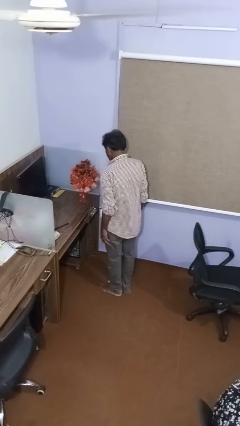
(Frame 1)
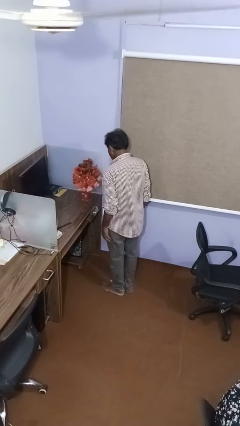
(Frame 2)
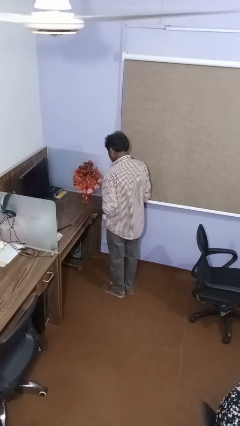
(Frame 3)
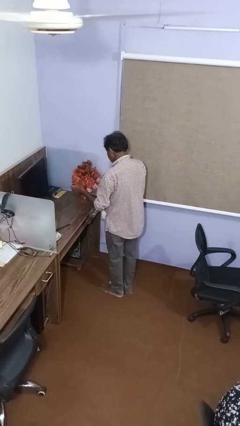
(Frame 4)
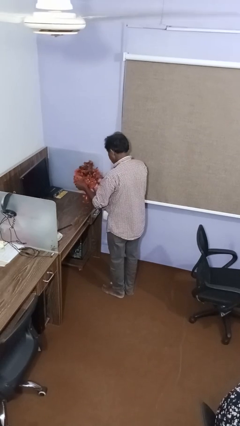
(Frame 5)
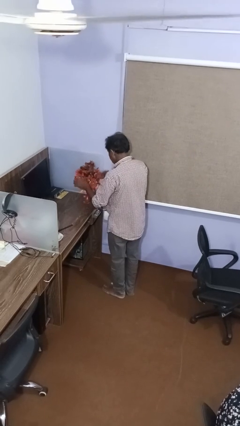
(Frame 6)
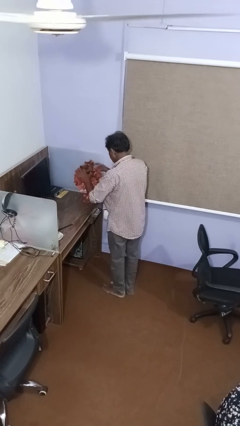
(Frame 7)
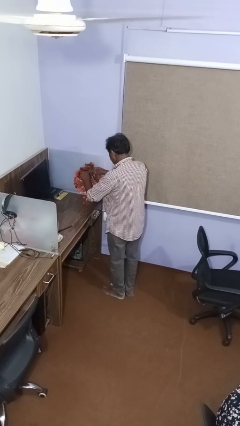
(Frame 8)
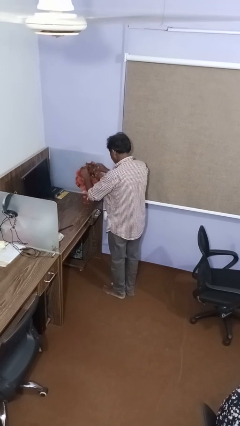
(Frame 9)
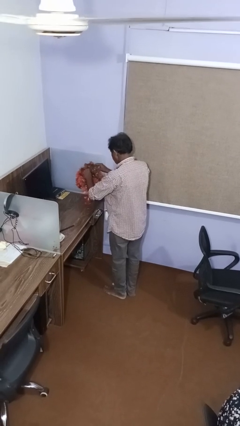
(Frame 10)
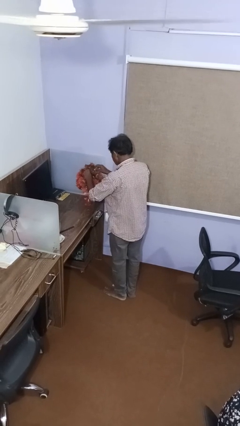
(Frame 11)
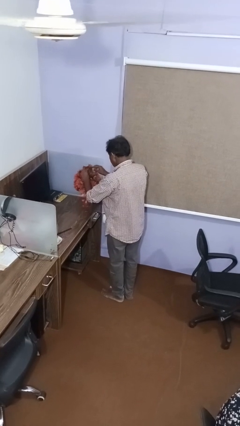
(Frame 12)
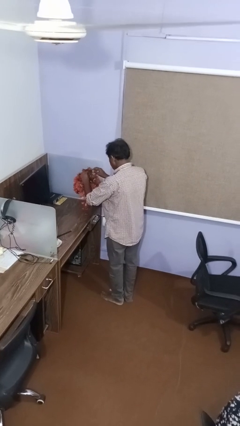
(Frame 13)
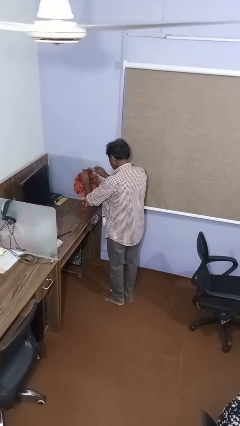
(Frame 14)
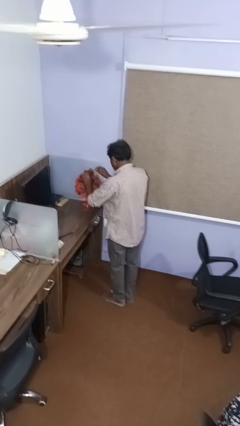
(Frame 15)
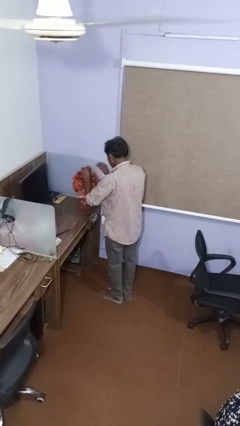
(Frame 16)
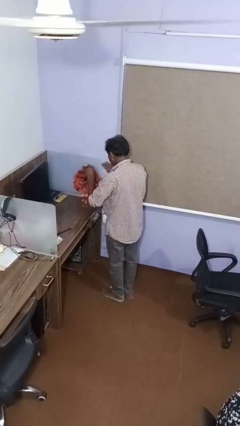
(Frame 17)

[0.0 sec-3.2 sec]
person arranges flowers in vase

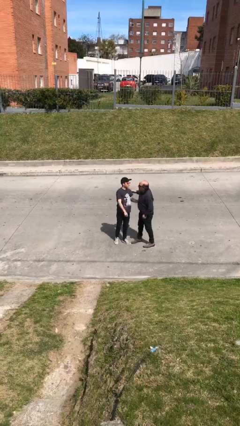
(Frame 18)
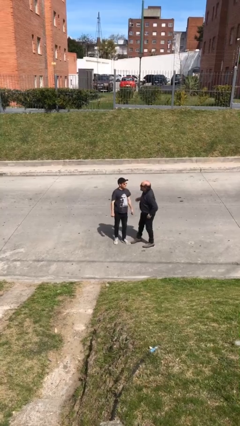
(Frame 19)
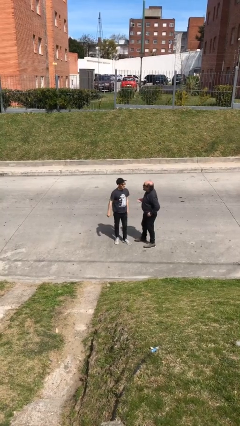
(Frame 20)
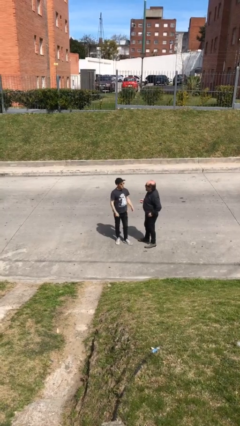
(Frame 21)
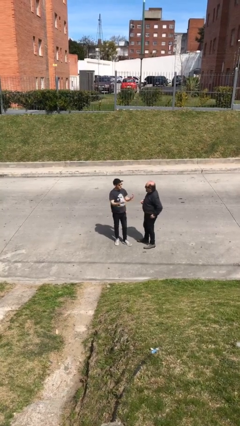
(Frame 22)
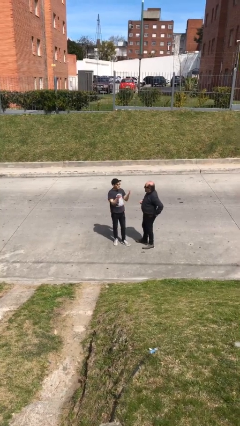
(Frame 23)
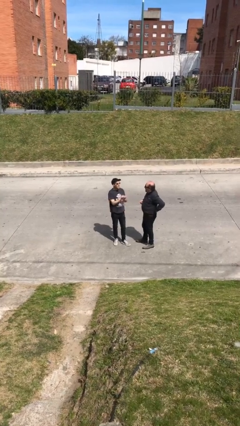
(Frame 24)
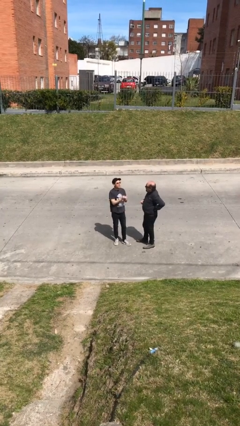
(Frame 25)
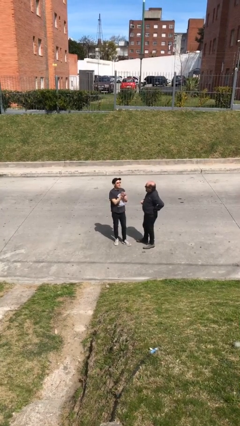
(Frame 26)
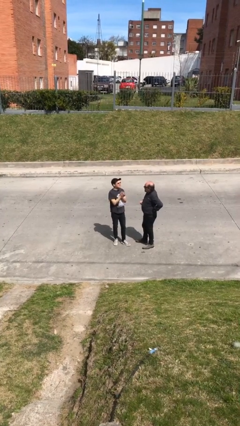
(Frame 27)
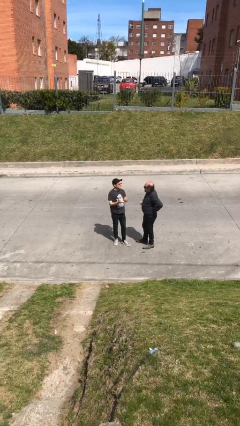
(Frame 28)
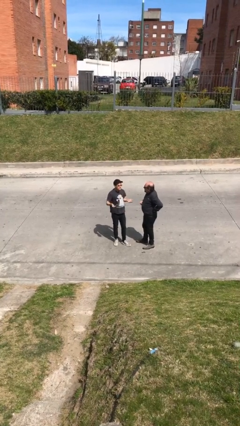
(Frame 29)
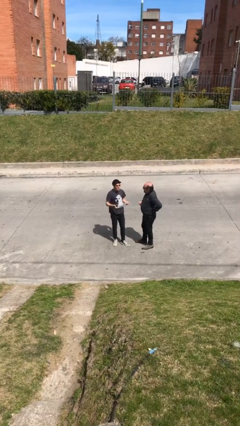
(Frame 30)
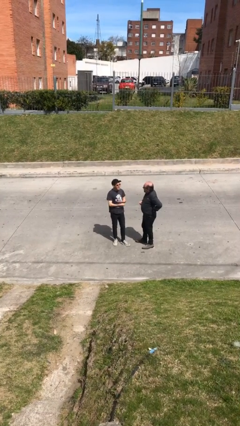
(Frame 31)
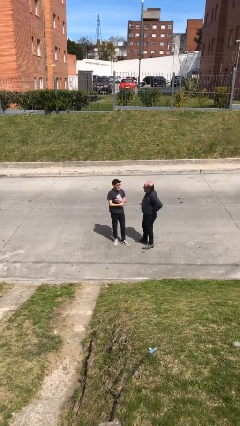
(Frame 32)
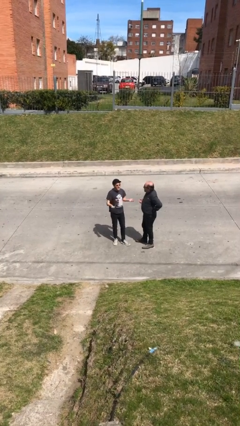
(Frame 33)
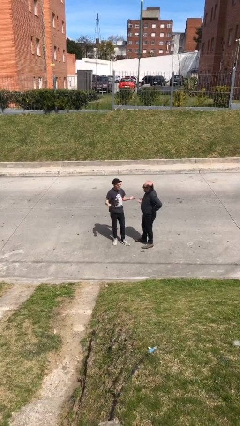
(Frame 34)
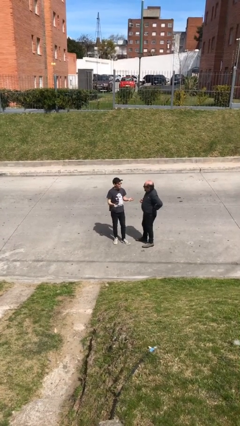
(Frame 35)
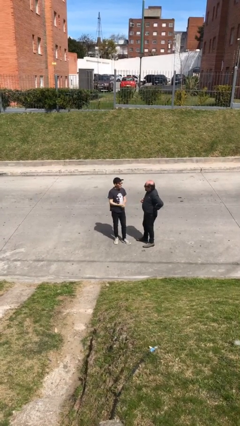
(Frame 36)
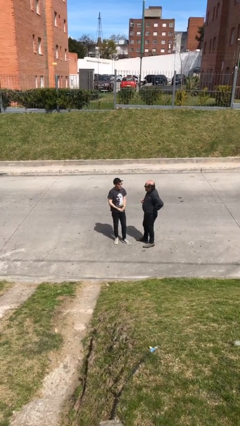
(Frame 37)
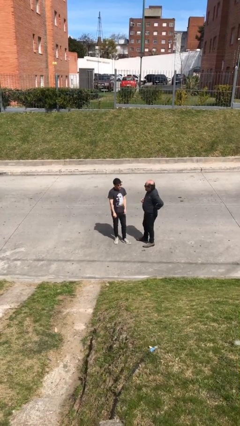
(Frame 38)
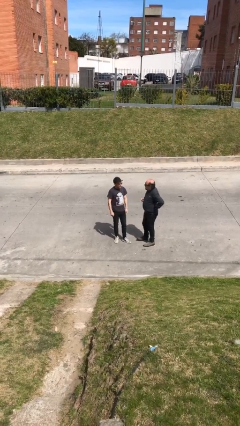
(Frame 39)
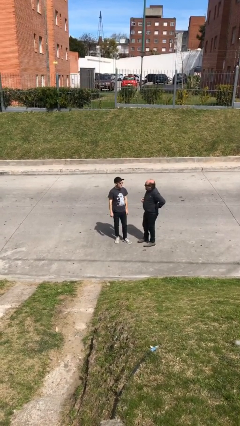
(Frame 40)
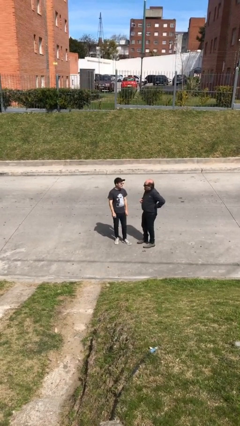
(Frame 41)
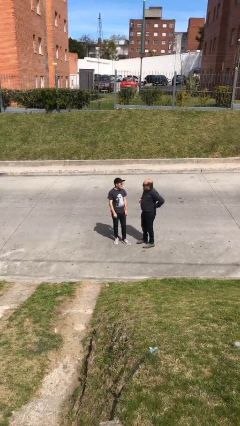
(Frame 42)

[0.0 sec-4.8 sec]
person talks to person

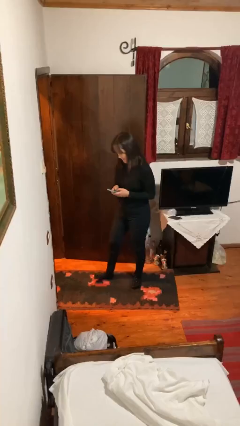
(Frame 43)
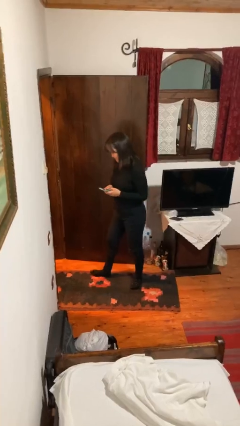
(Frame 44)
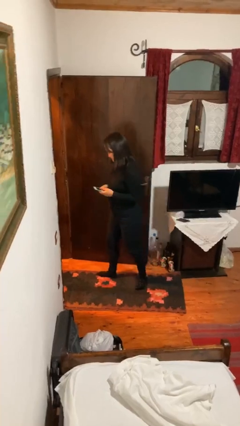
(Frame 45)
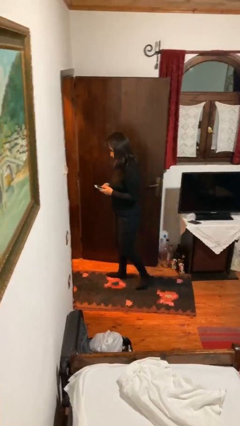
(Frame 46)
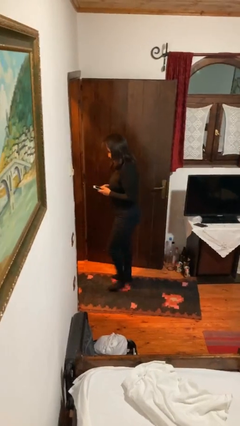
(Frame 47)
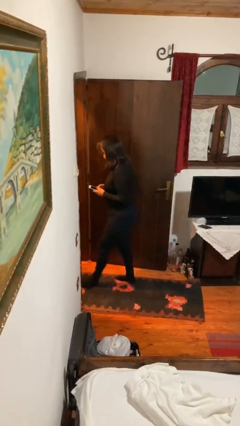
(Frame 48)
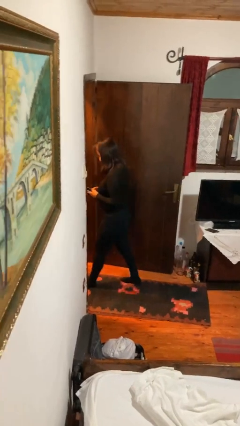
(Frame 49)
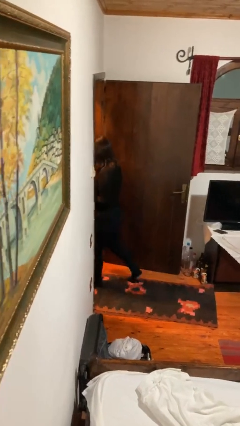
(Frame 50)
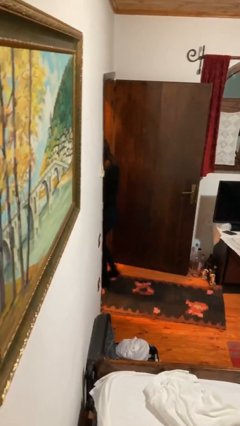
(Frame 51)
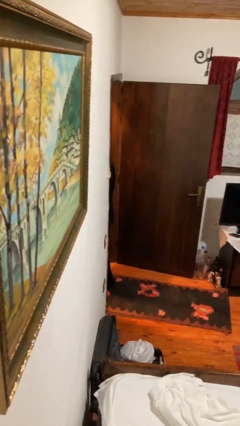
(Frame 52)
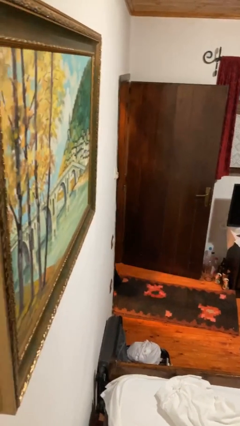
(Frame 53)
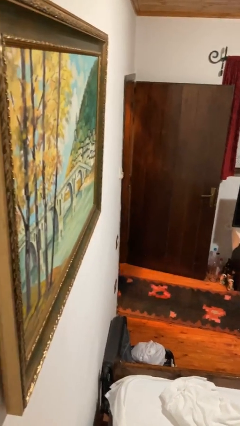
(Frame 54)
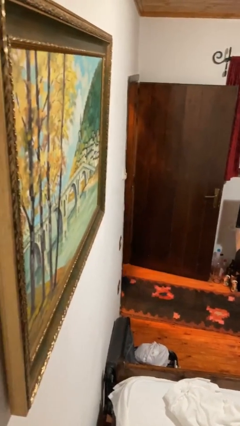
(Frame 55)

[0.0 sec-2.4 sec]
person exits scene through structure

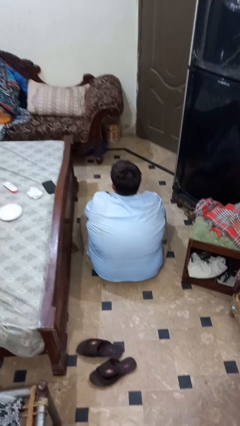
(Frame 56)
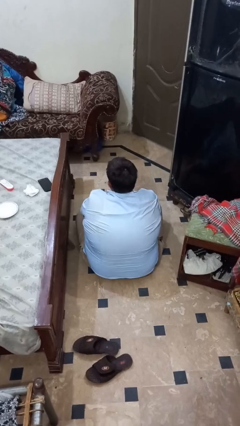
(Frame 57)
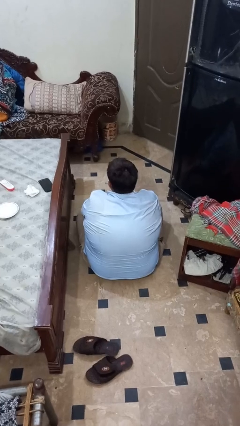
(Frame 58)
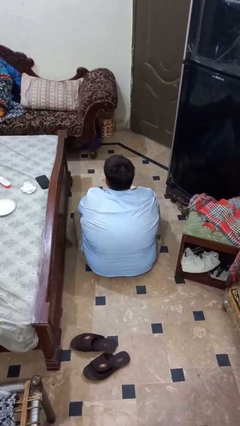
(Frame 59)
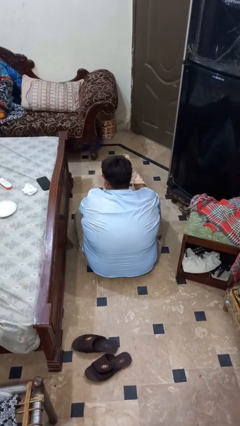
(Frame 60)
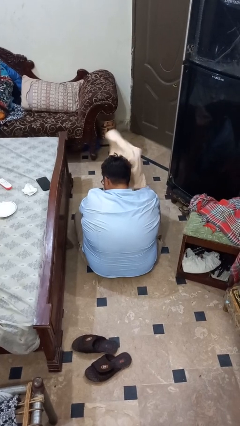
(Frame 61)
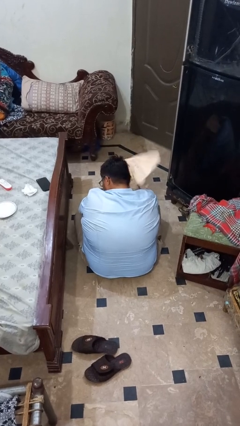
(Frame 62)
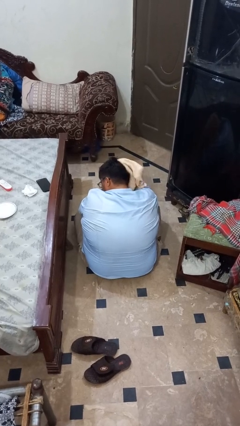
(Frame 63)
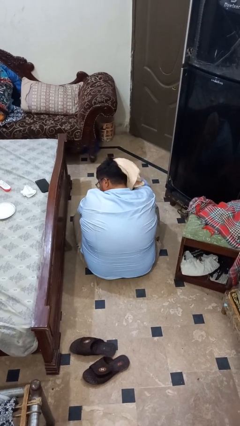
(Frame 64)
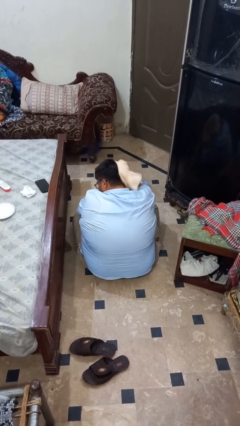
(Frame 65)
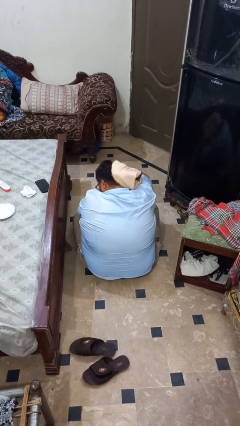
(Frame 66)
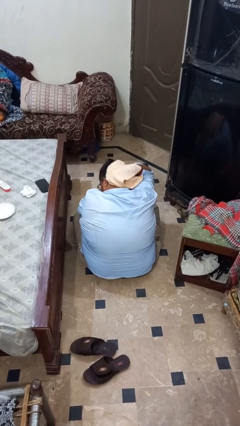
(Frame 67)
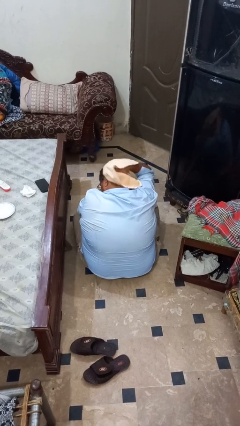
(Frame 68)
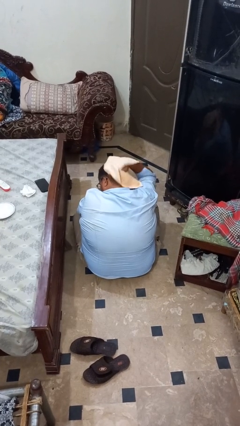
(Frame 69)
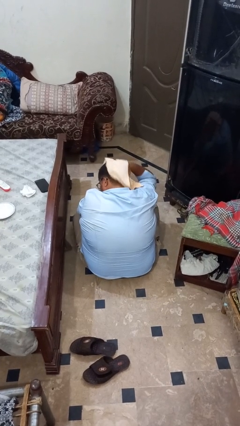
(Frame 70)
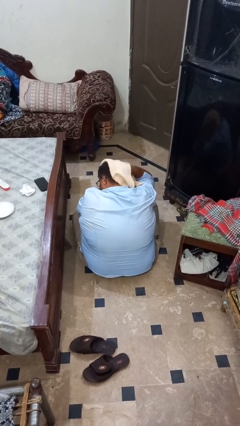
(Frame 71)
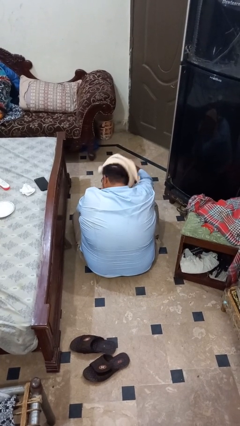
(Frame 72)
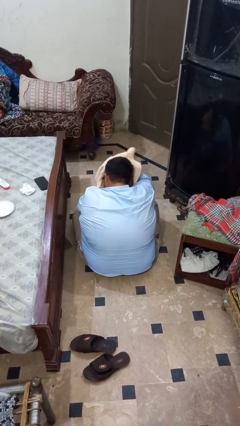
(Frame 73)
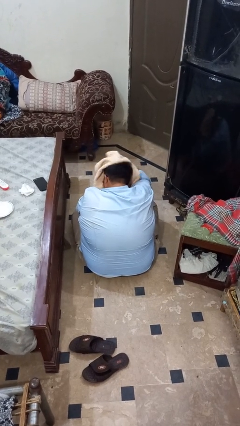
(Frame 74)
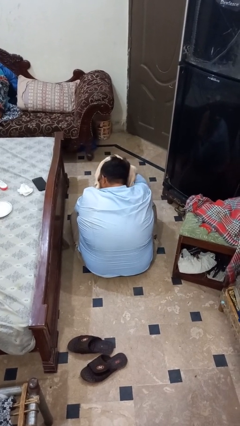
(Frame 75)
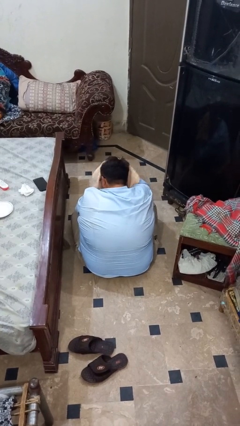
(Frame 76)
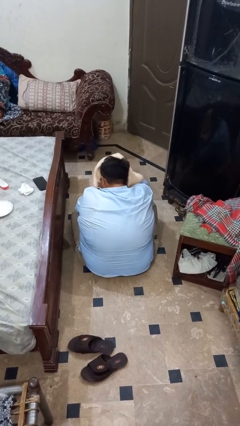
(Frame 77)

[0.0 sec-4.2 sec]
person dries hair with towel

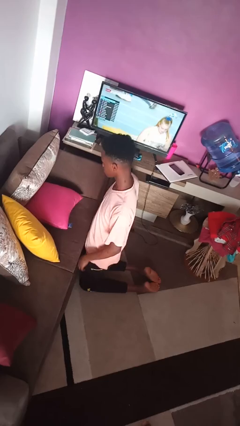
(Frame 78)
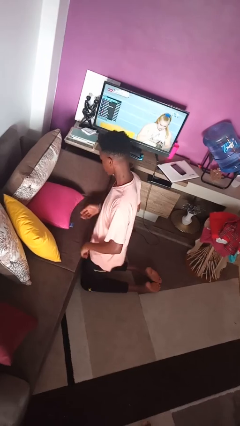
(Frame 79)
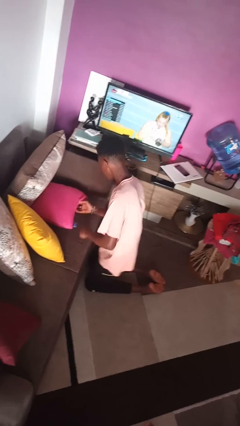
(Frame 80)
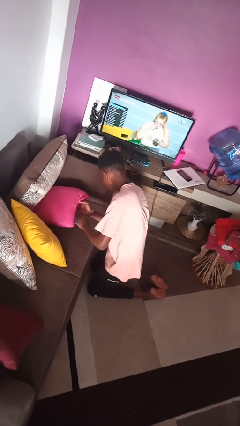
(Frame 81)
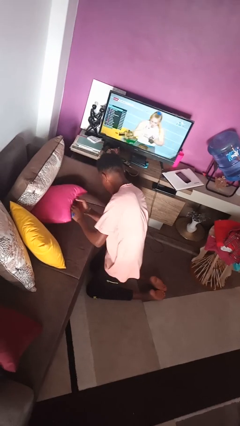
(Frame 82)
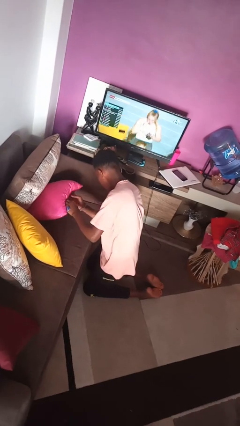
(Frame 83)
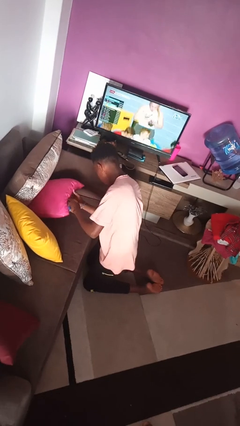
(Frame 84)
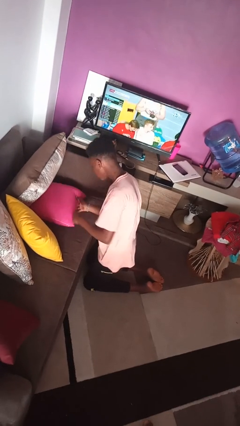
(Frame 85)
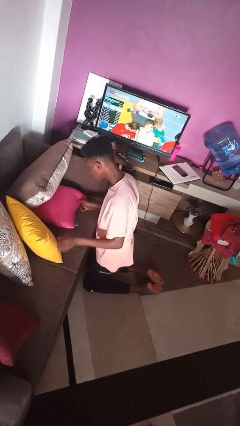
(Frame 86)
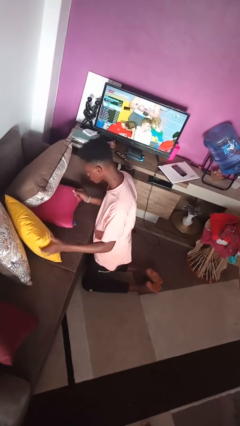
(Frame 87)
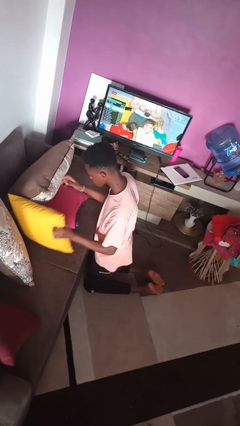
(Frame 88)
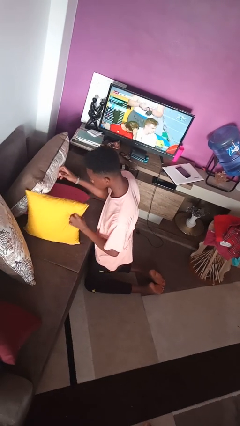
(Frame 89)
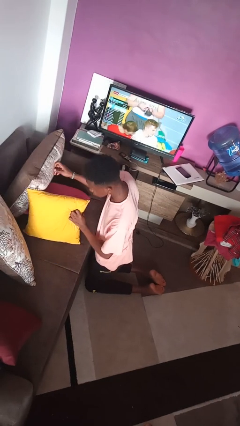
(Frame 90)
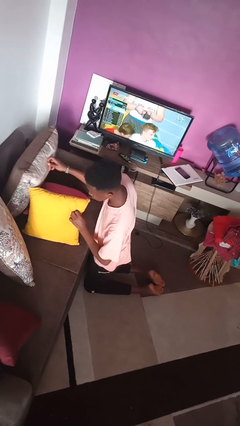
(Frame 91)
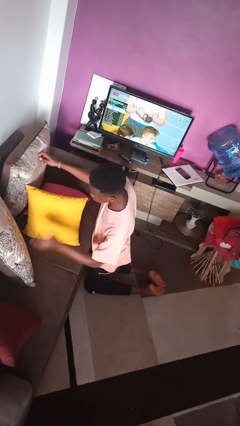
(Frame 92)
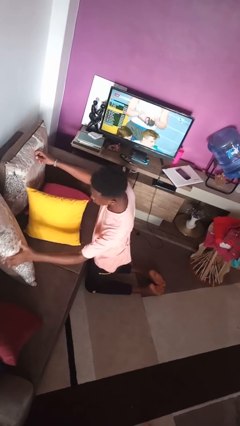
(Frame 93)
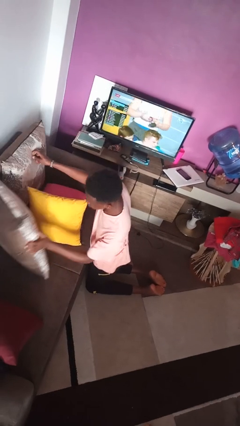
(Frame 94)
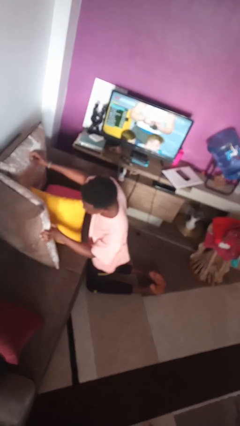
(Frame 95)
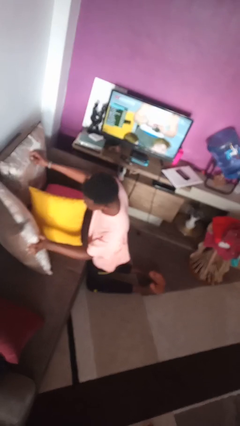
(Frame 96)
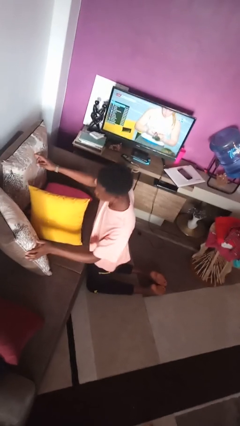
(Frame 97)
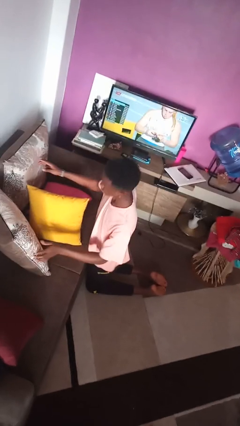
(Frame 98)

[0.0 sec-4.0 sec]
person searches in couch
